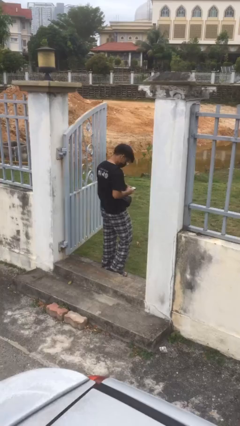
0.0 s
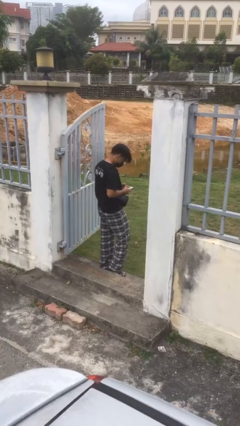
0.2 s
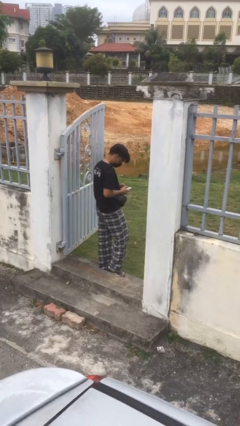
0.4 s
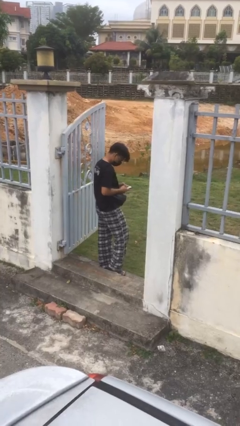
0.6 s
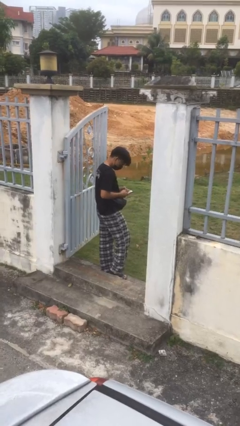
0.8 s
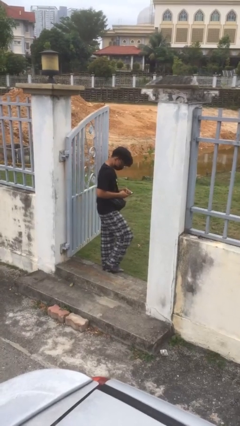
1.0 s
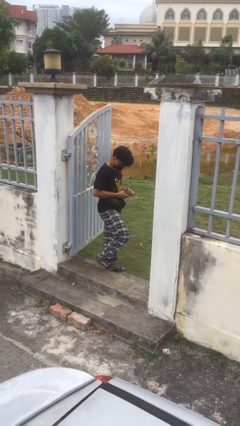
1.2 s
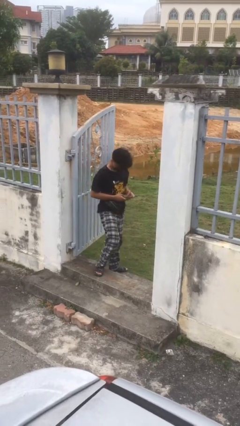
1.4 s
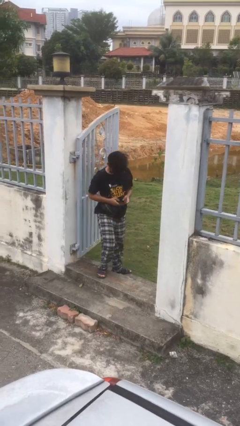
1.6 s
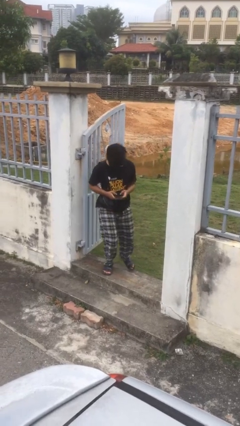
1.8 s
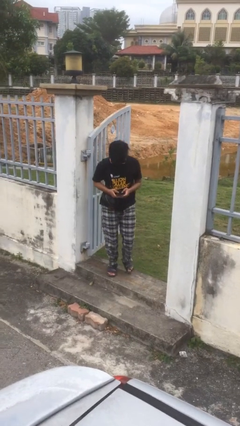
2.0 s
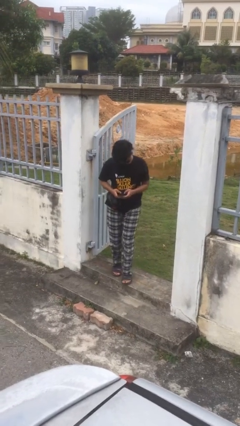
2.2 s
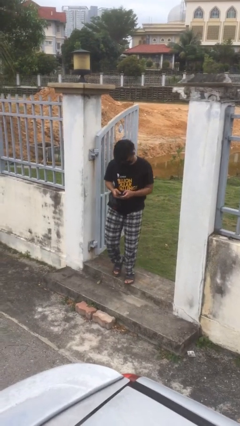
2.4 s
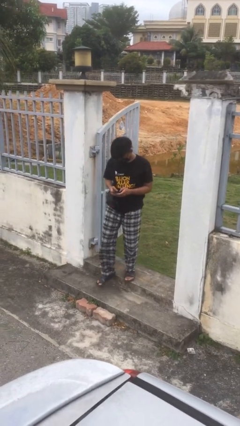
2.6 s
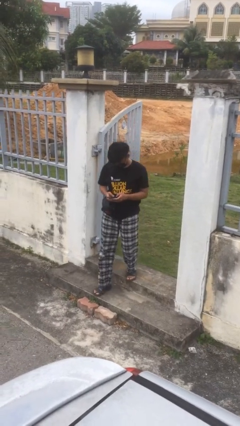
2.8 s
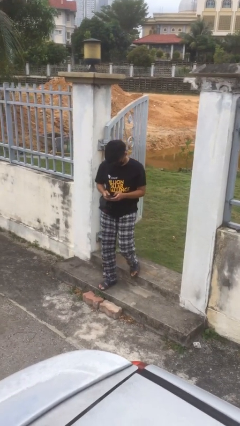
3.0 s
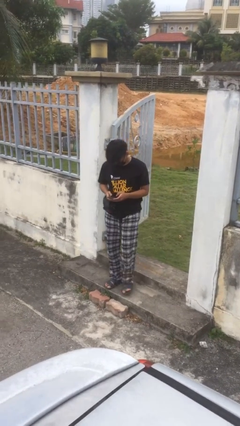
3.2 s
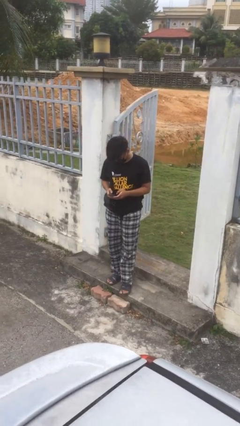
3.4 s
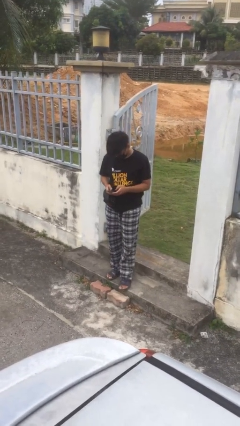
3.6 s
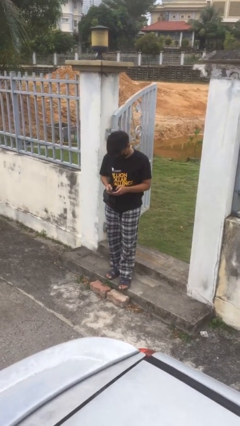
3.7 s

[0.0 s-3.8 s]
person enters scene through structure

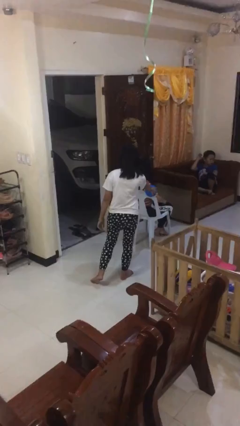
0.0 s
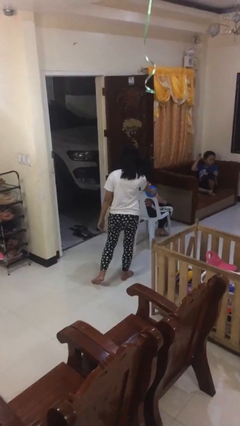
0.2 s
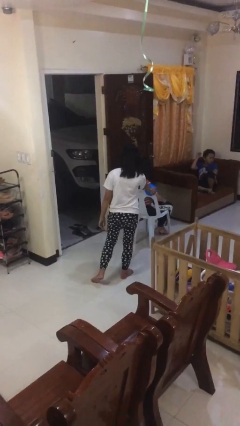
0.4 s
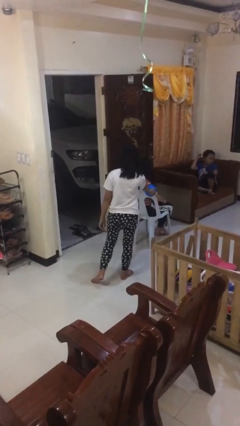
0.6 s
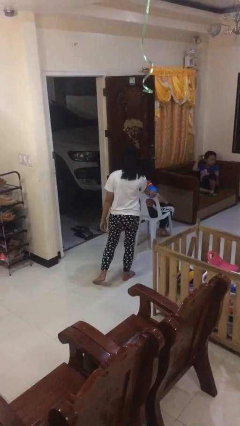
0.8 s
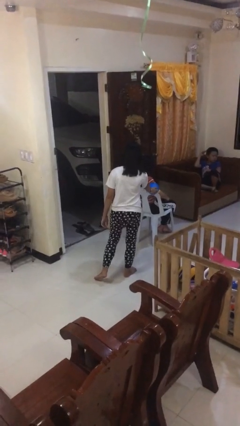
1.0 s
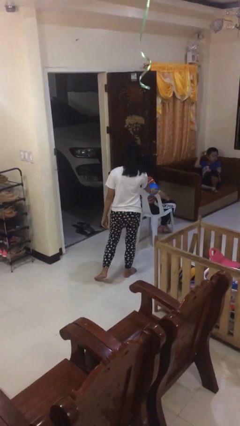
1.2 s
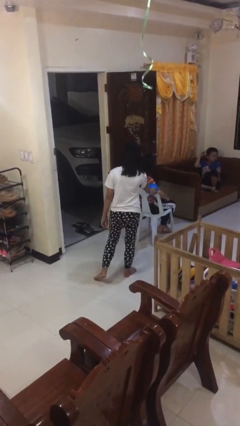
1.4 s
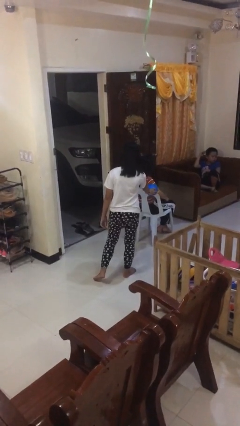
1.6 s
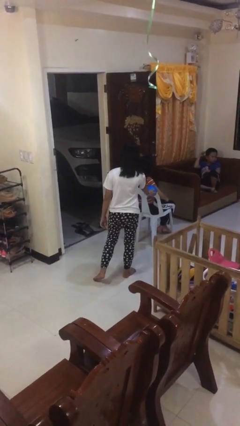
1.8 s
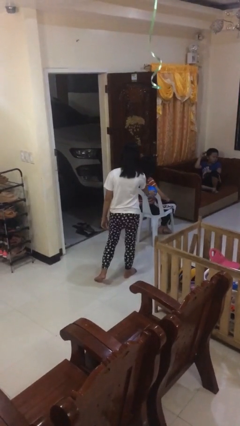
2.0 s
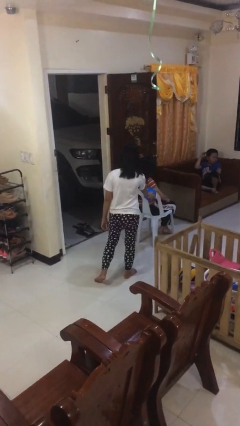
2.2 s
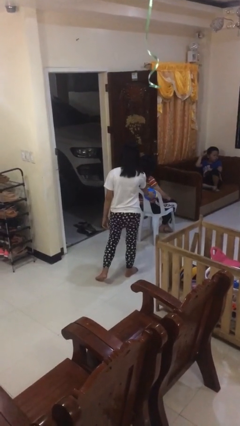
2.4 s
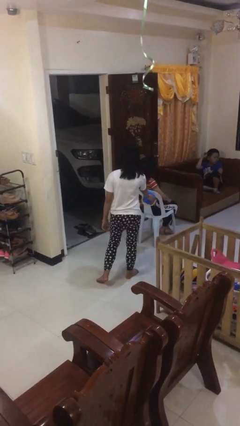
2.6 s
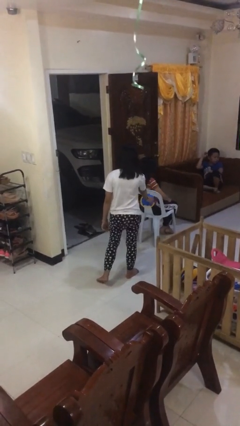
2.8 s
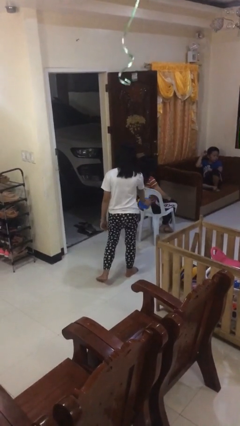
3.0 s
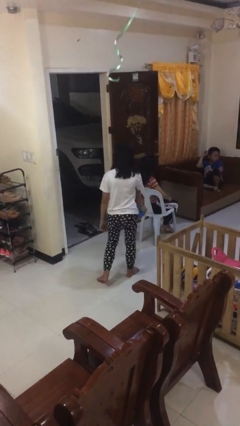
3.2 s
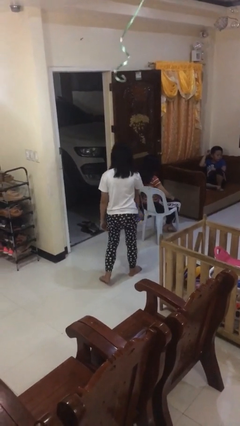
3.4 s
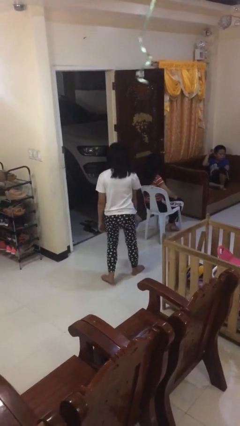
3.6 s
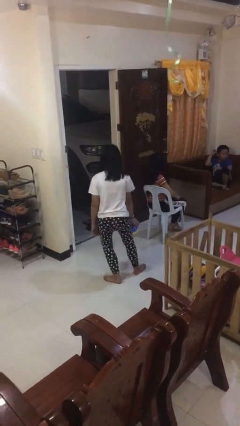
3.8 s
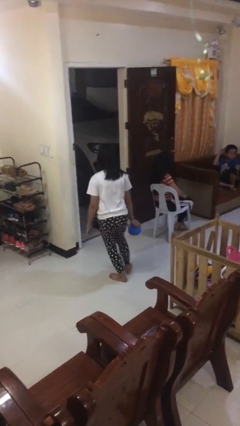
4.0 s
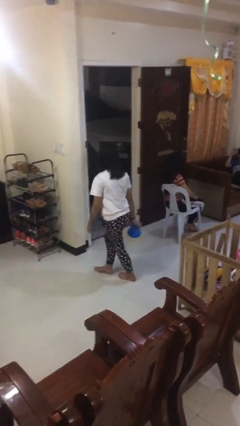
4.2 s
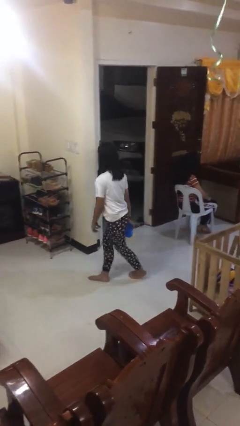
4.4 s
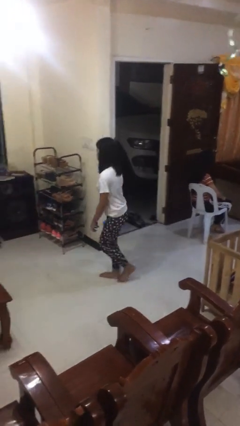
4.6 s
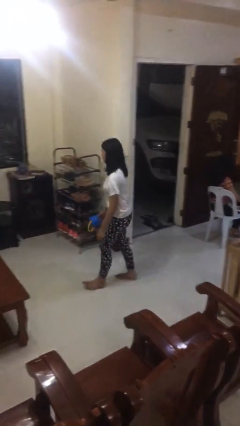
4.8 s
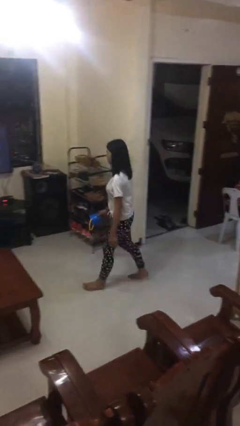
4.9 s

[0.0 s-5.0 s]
person steals object from person

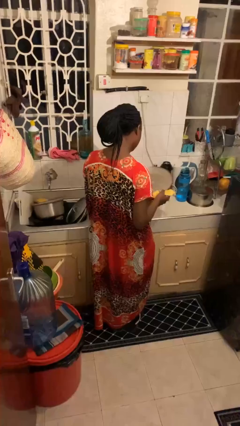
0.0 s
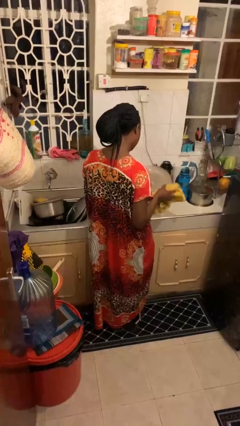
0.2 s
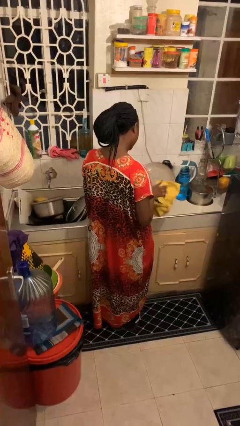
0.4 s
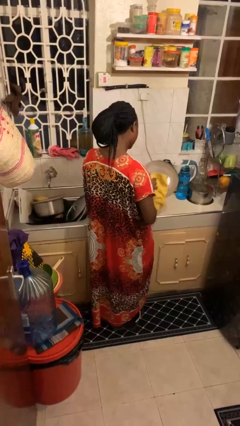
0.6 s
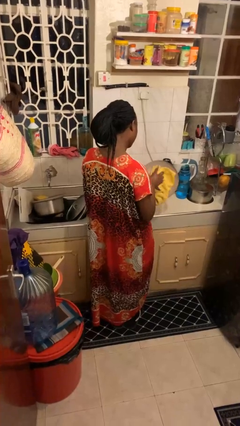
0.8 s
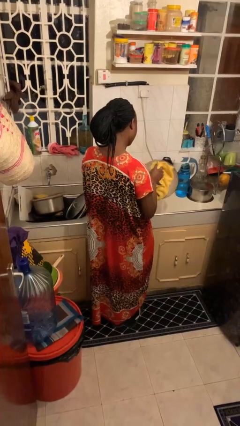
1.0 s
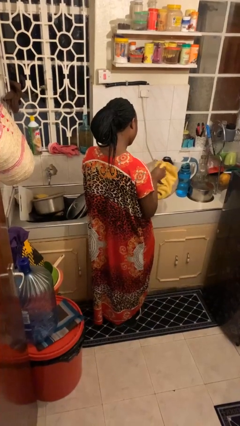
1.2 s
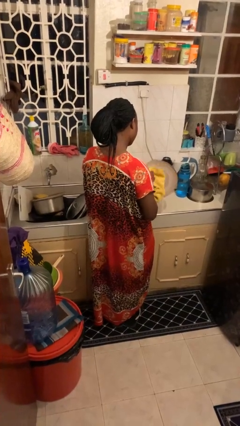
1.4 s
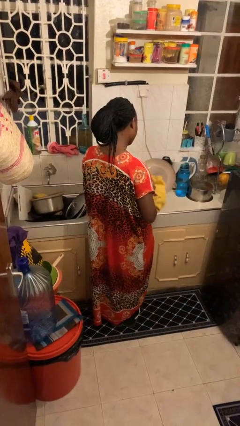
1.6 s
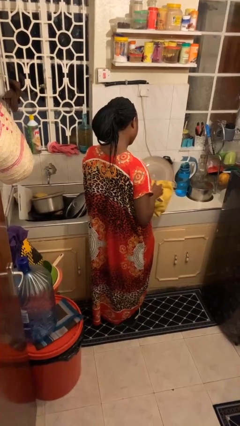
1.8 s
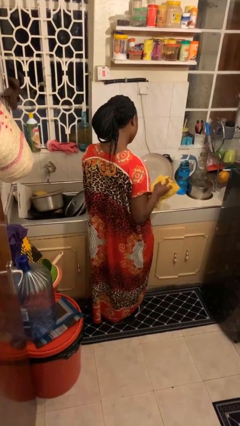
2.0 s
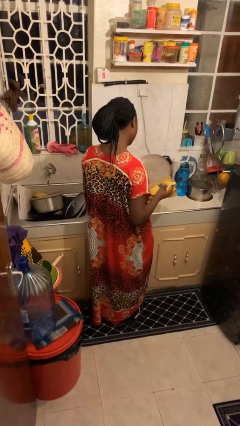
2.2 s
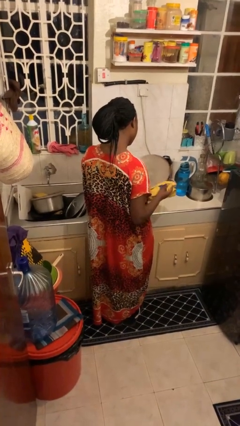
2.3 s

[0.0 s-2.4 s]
person dries dish

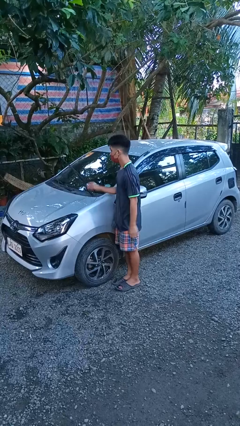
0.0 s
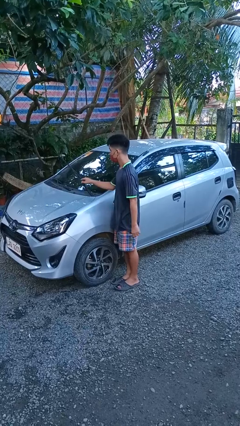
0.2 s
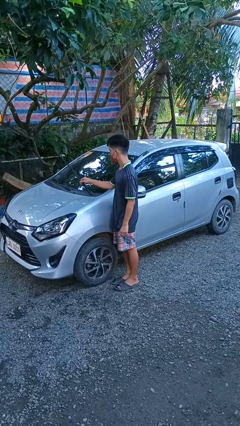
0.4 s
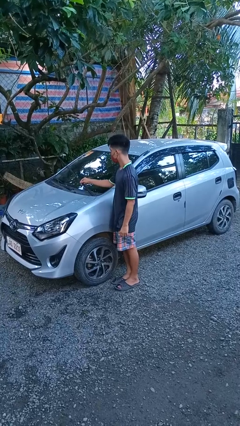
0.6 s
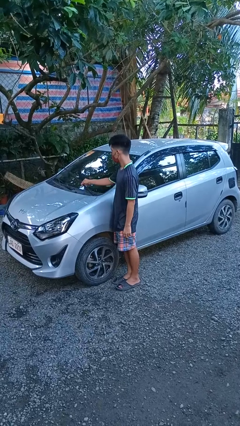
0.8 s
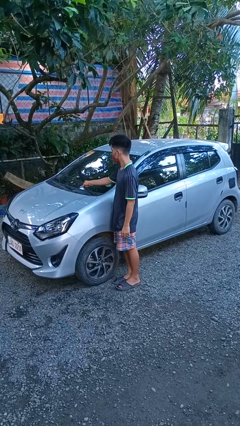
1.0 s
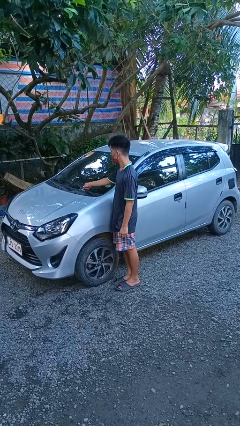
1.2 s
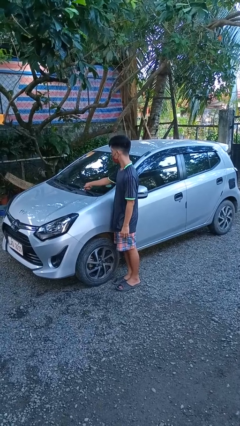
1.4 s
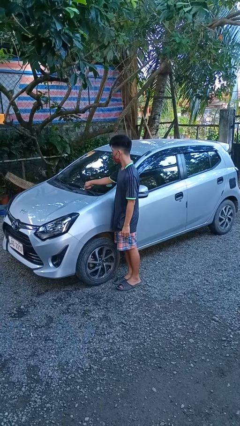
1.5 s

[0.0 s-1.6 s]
person flips down car wipers

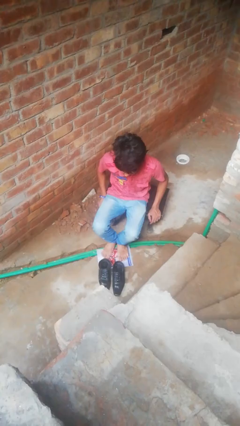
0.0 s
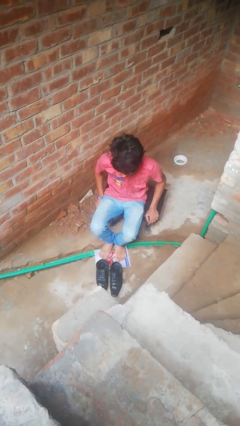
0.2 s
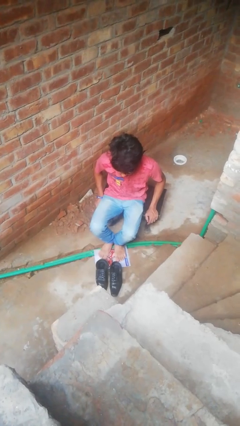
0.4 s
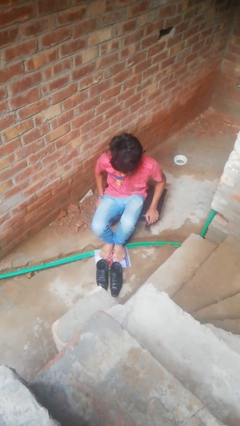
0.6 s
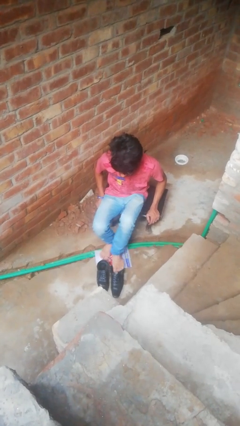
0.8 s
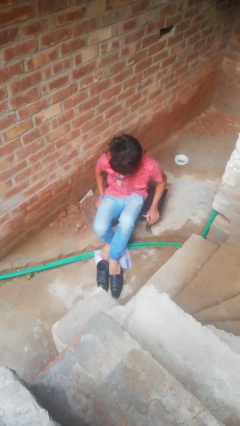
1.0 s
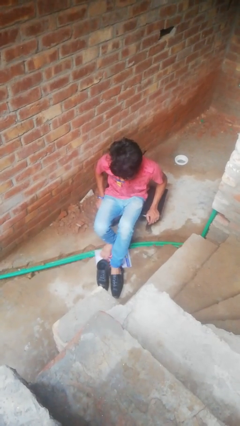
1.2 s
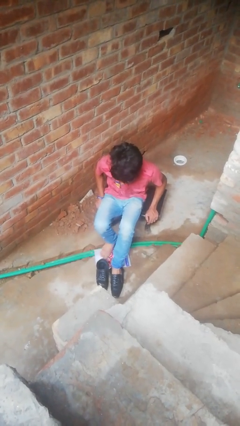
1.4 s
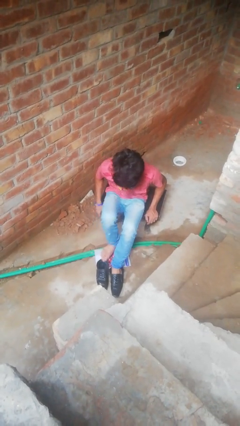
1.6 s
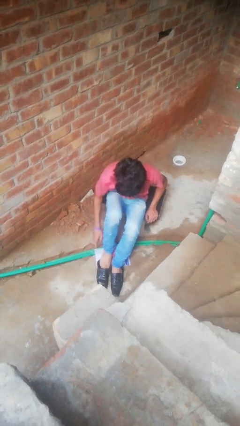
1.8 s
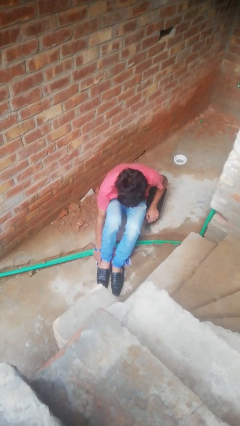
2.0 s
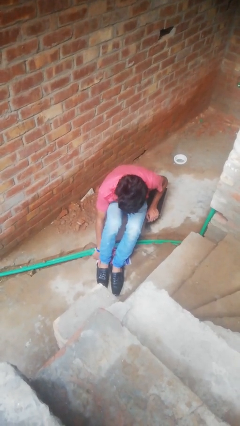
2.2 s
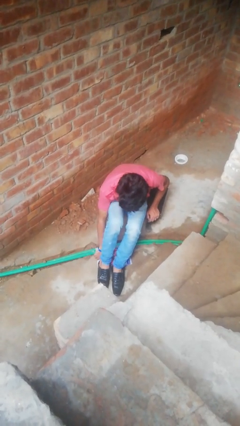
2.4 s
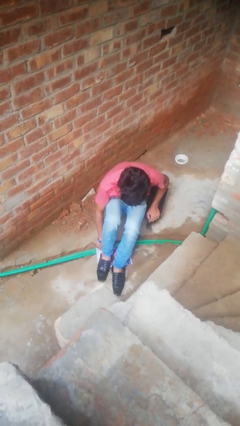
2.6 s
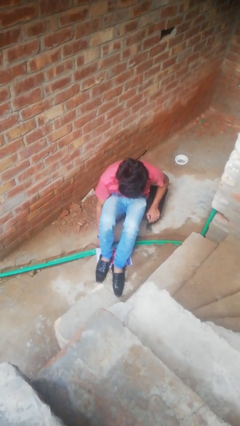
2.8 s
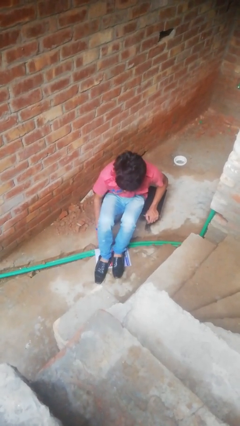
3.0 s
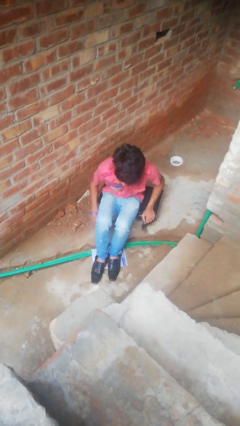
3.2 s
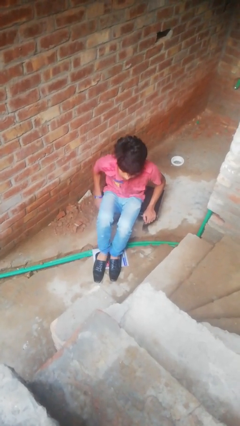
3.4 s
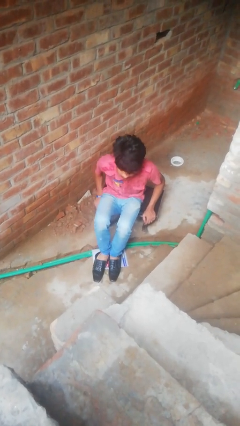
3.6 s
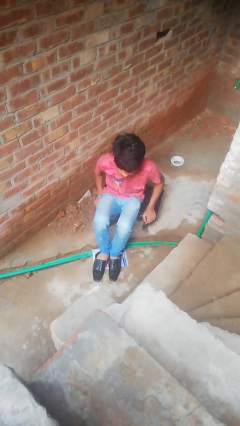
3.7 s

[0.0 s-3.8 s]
person puts on shoes

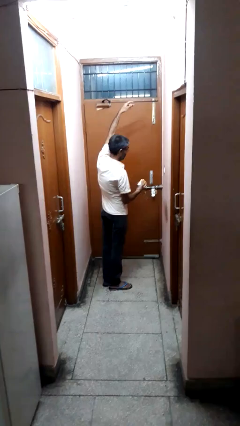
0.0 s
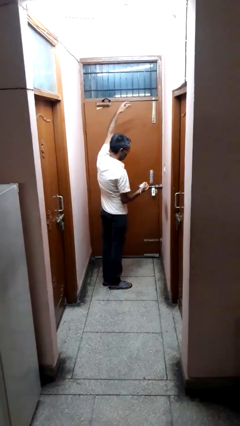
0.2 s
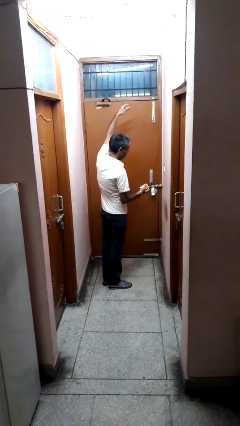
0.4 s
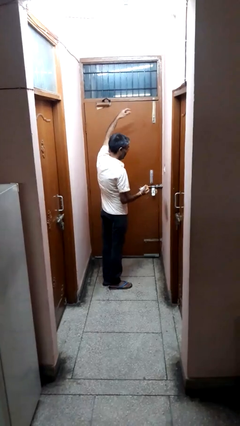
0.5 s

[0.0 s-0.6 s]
person catches dropped object
